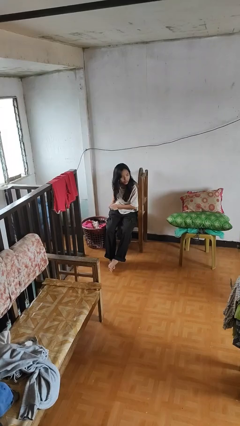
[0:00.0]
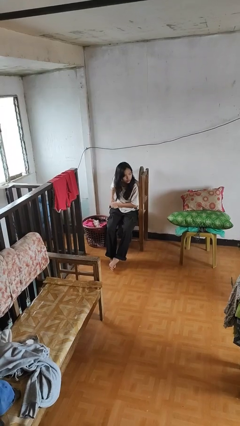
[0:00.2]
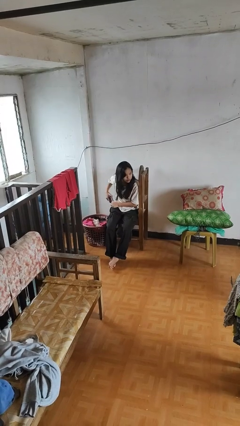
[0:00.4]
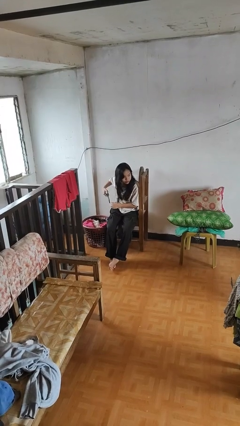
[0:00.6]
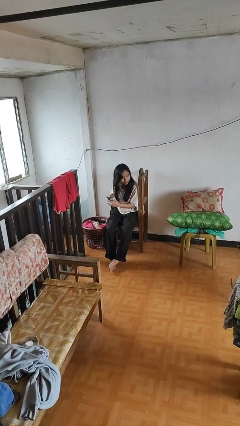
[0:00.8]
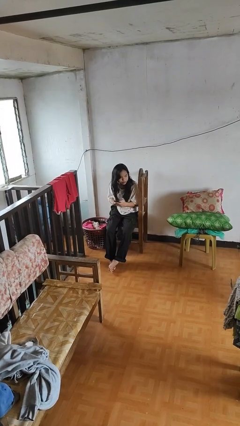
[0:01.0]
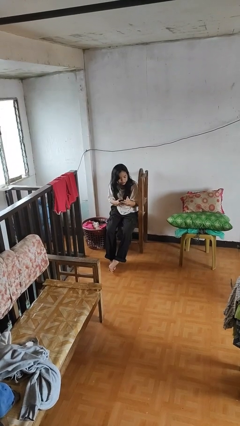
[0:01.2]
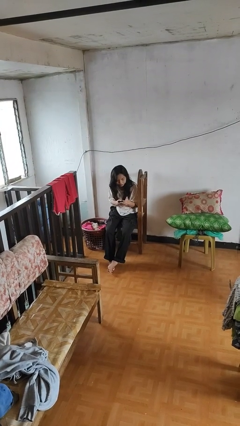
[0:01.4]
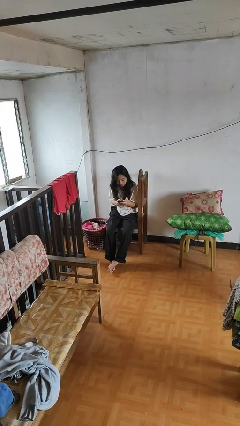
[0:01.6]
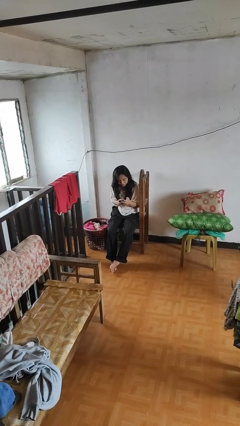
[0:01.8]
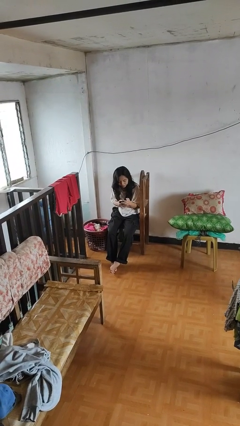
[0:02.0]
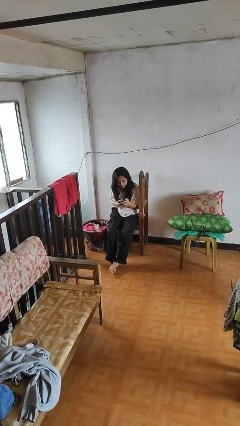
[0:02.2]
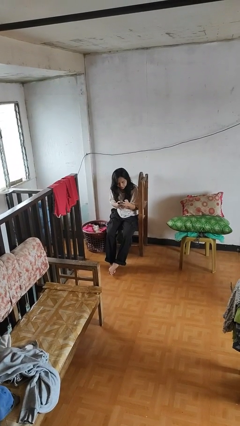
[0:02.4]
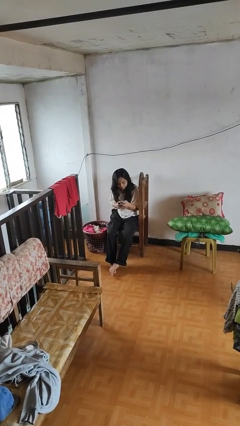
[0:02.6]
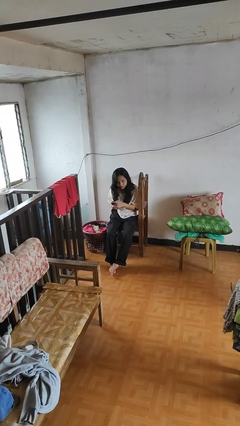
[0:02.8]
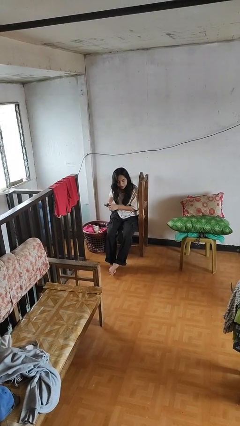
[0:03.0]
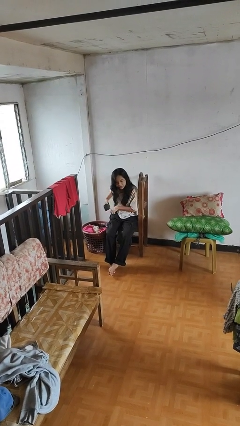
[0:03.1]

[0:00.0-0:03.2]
person takes phone from pocket

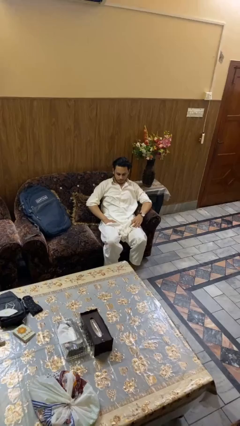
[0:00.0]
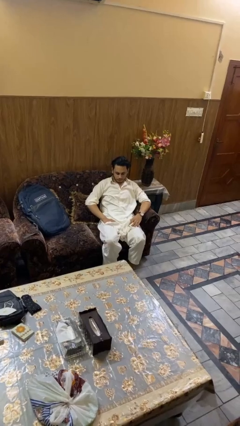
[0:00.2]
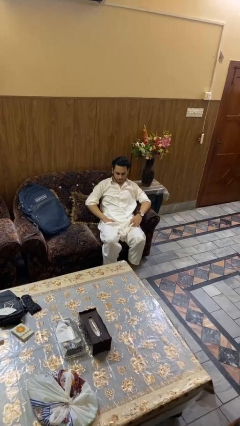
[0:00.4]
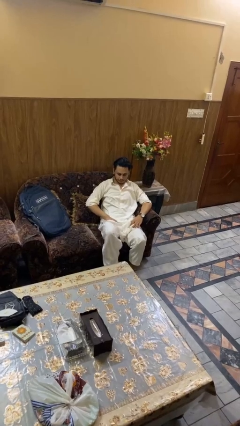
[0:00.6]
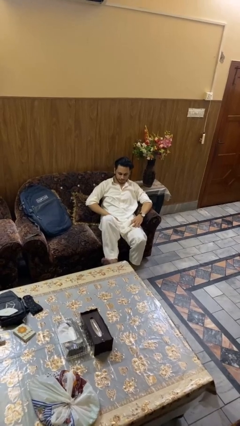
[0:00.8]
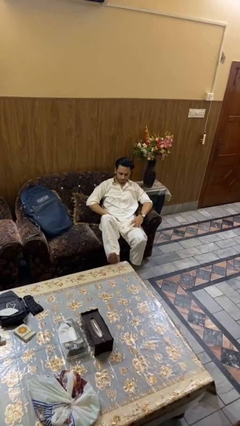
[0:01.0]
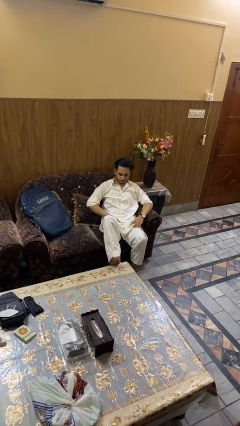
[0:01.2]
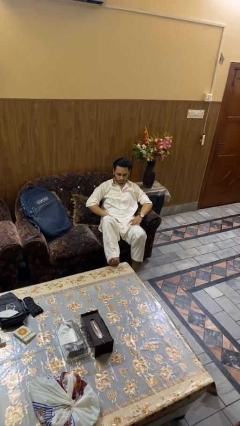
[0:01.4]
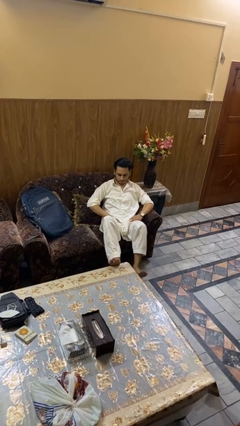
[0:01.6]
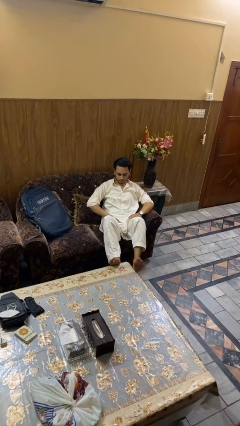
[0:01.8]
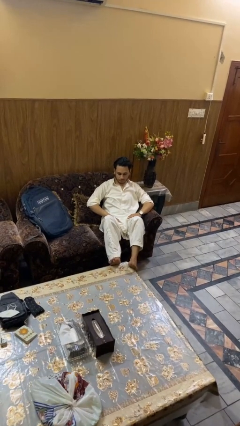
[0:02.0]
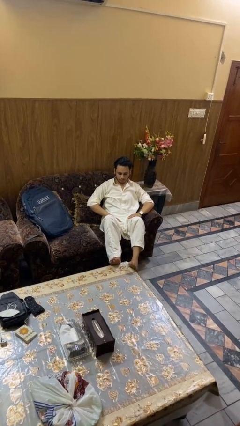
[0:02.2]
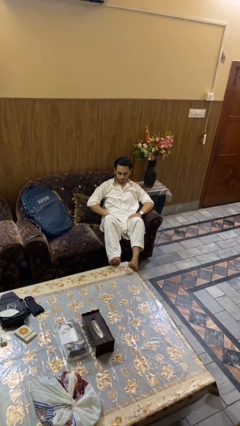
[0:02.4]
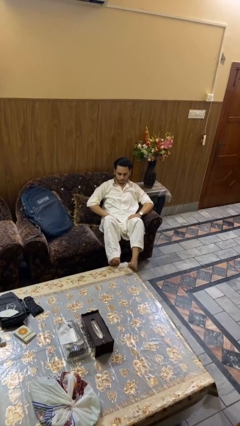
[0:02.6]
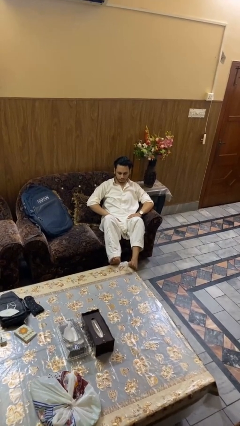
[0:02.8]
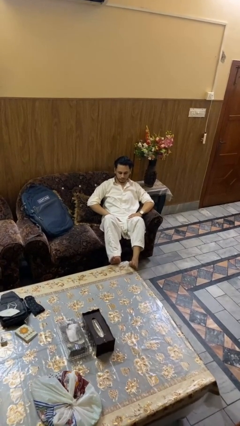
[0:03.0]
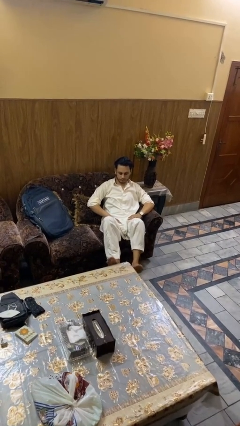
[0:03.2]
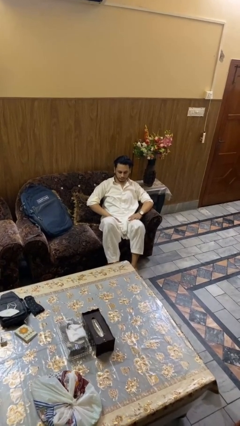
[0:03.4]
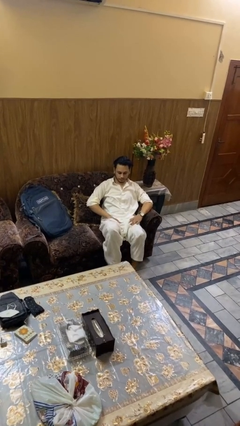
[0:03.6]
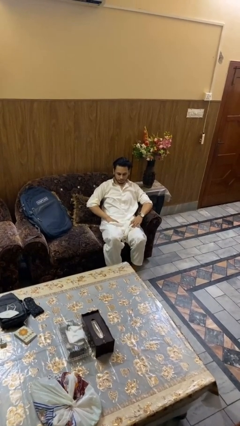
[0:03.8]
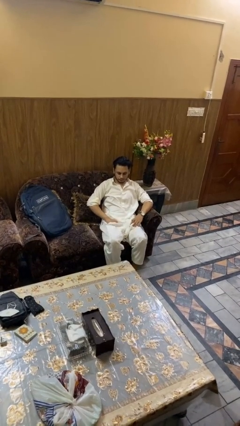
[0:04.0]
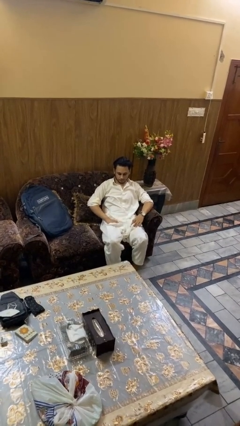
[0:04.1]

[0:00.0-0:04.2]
person puts feet up

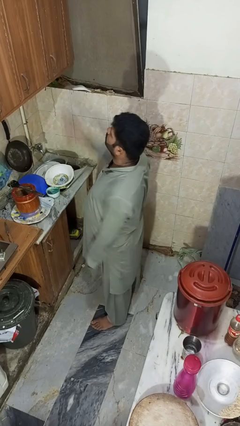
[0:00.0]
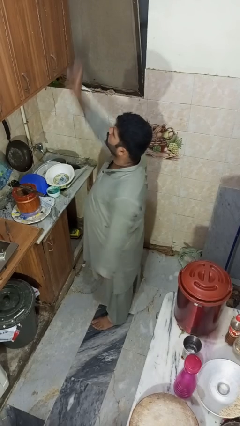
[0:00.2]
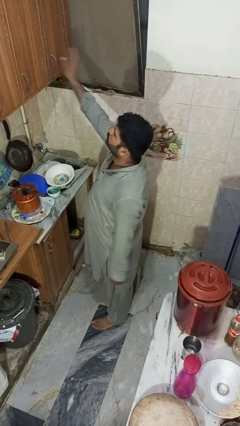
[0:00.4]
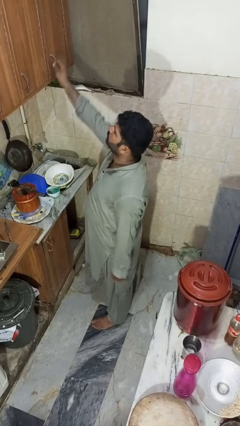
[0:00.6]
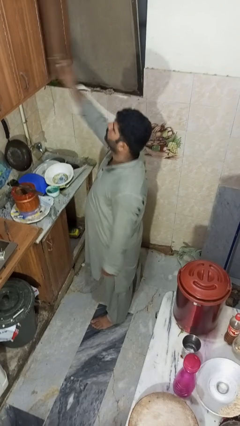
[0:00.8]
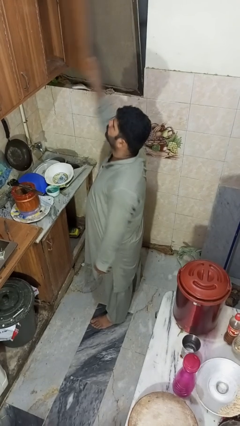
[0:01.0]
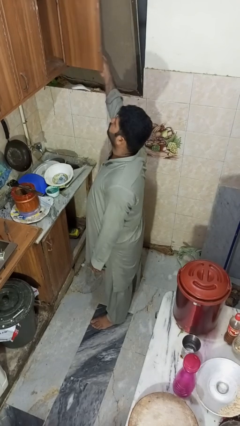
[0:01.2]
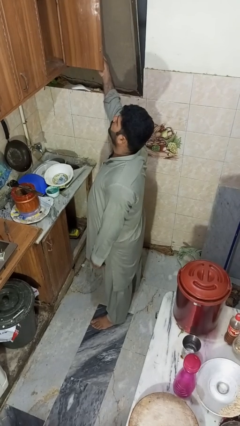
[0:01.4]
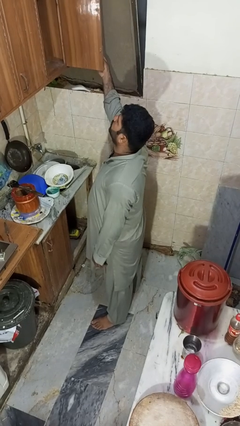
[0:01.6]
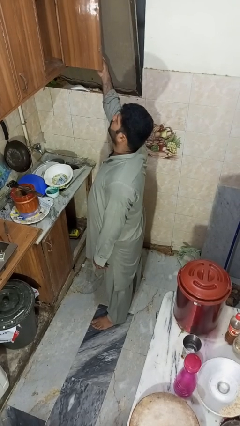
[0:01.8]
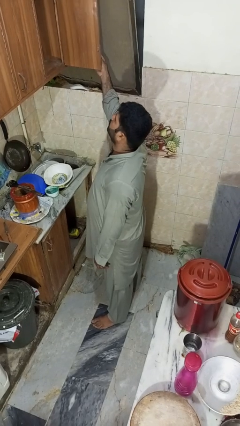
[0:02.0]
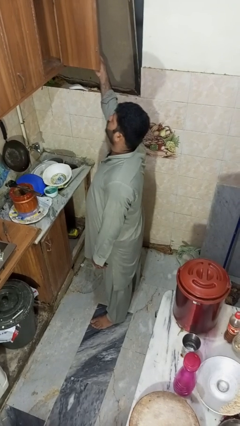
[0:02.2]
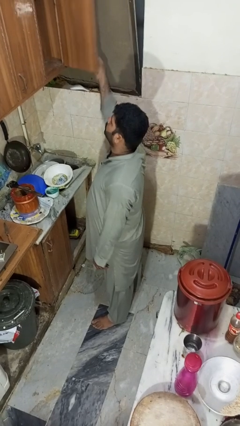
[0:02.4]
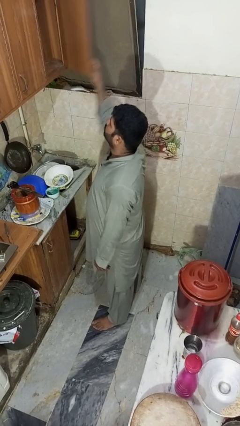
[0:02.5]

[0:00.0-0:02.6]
person opens cabinet

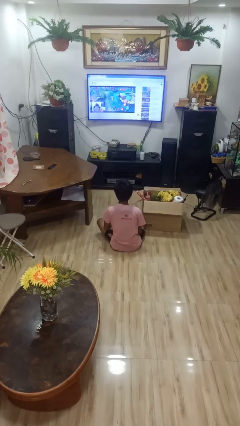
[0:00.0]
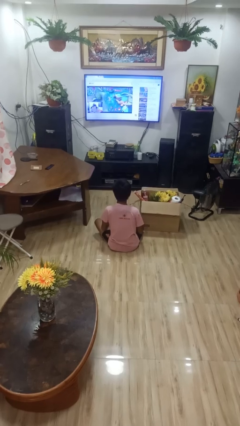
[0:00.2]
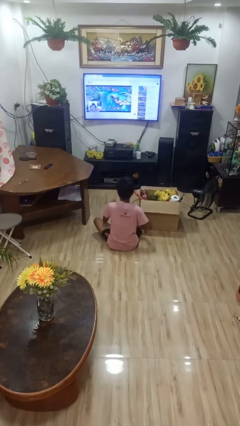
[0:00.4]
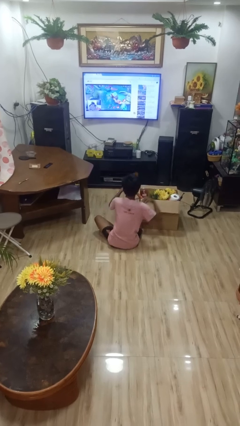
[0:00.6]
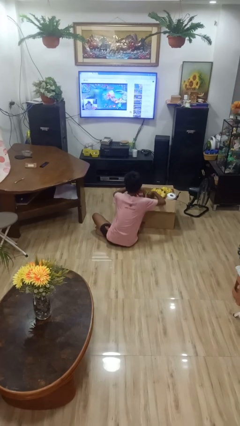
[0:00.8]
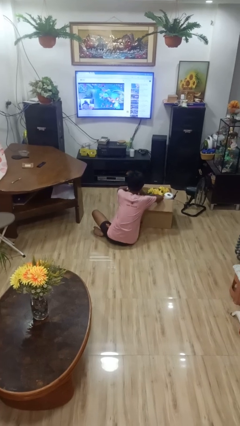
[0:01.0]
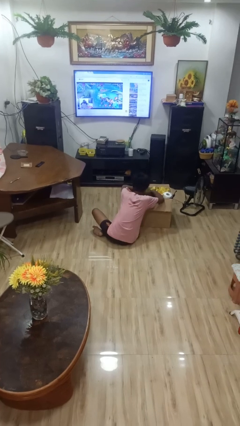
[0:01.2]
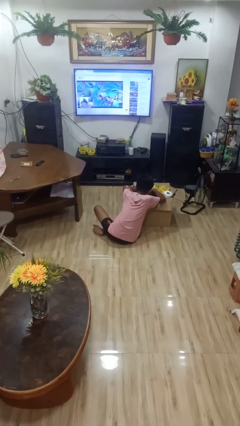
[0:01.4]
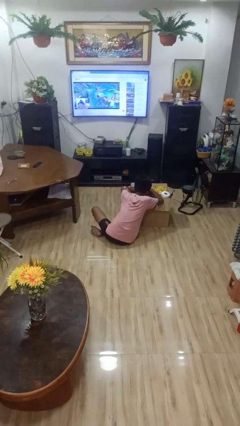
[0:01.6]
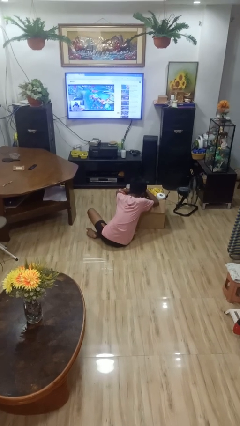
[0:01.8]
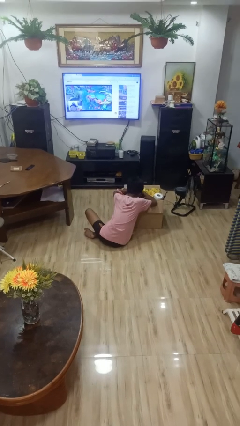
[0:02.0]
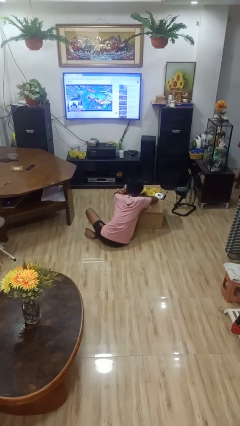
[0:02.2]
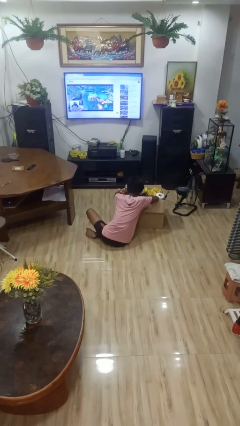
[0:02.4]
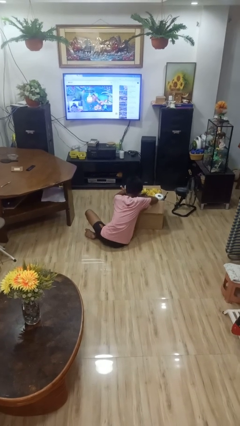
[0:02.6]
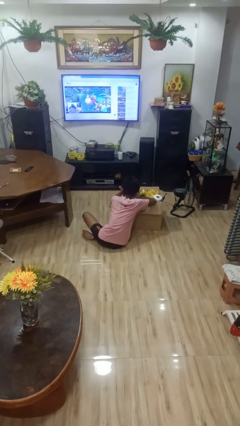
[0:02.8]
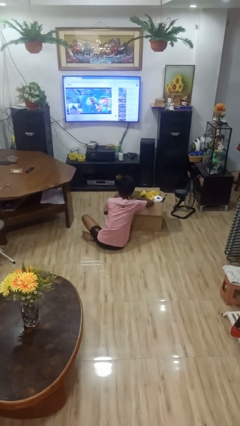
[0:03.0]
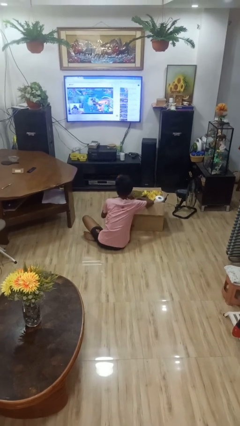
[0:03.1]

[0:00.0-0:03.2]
person searches in box

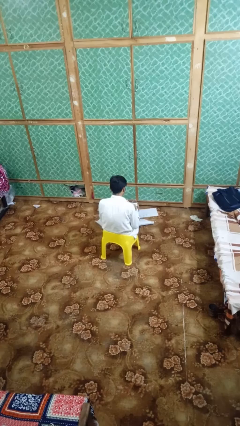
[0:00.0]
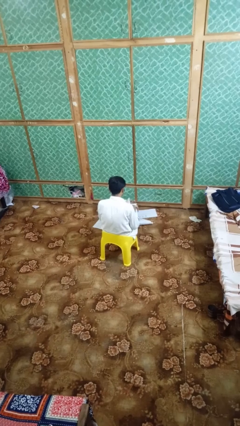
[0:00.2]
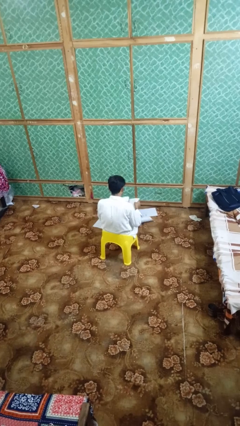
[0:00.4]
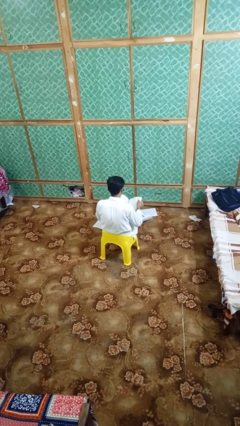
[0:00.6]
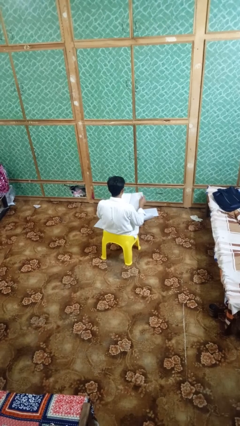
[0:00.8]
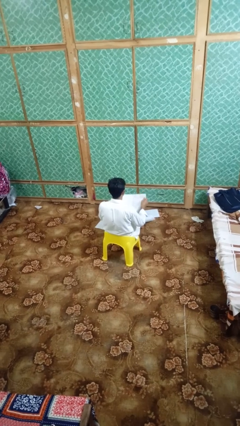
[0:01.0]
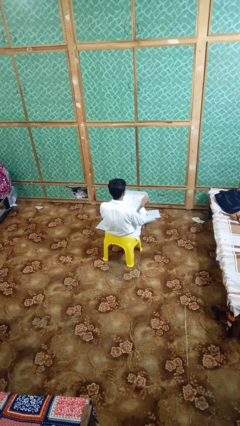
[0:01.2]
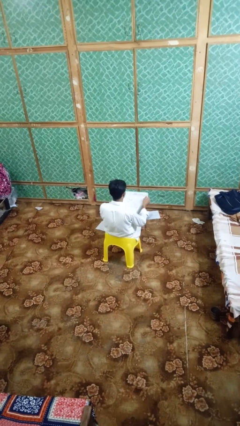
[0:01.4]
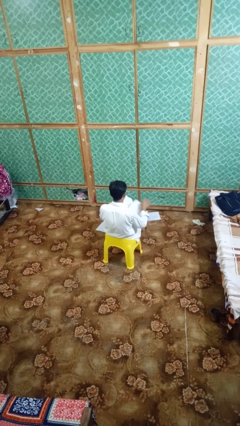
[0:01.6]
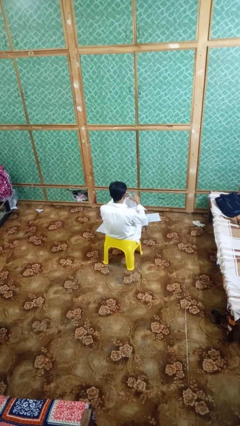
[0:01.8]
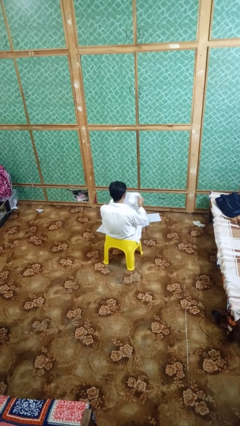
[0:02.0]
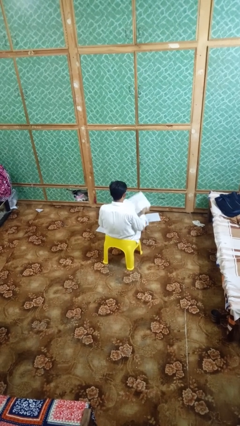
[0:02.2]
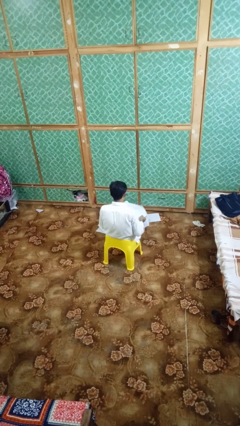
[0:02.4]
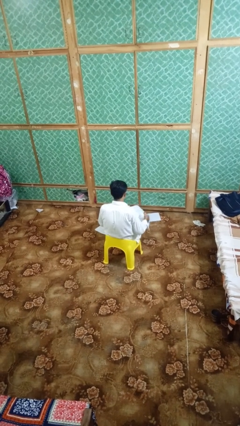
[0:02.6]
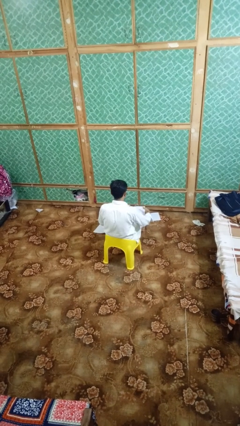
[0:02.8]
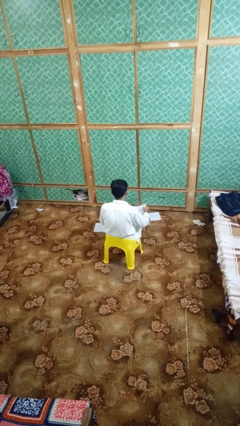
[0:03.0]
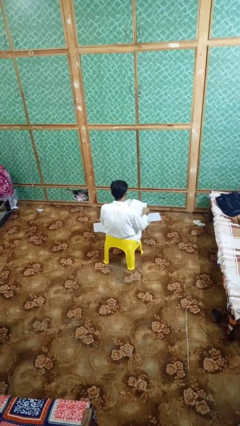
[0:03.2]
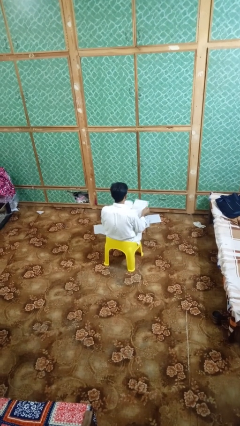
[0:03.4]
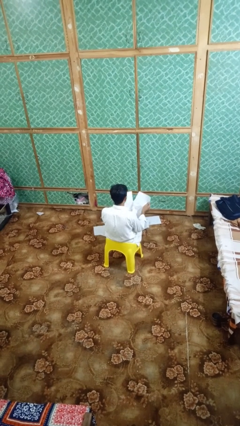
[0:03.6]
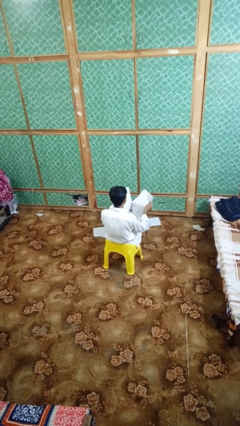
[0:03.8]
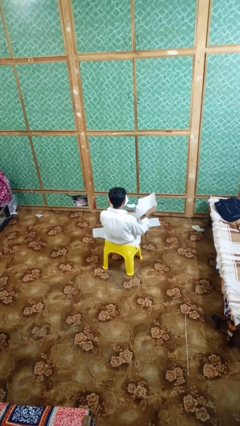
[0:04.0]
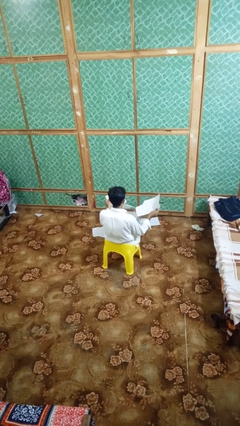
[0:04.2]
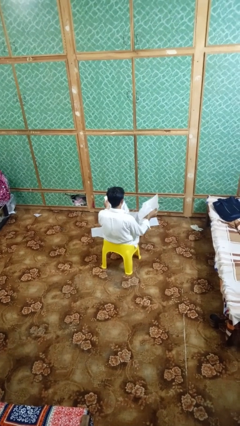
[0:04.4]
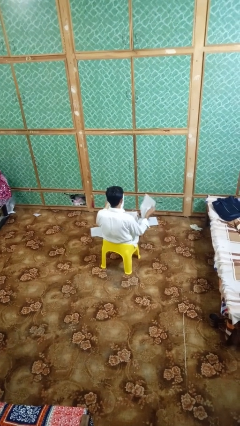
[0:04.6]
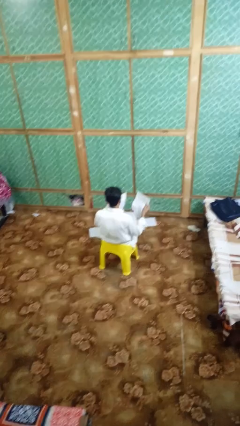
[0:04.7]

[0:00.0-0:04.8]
person tears paper
